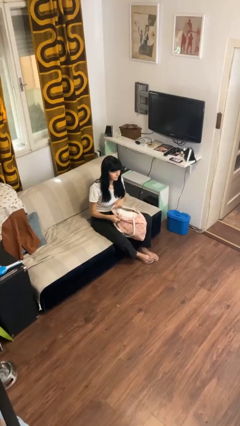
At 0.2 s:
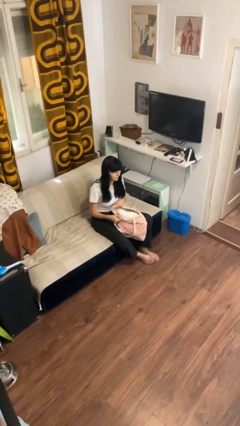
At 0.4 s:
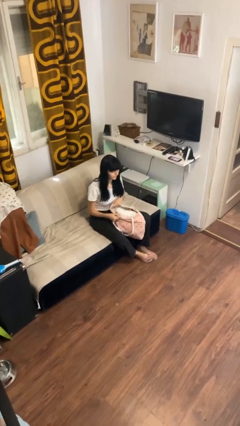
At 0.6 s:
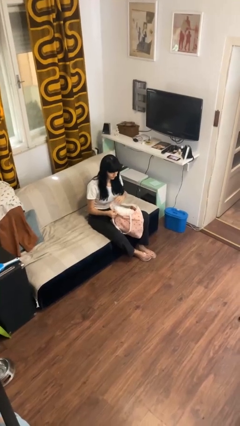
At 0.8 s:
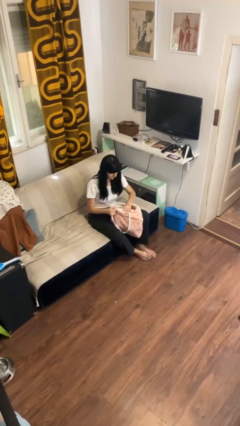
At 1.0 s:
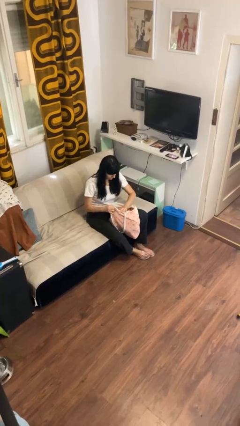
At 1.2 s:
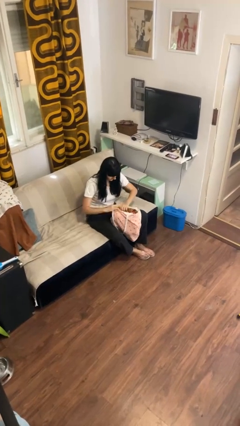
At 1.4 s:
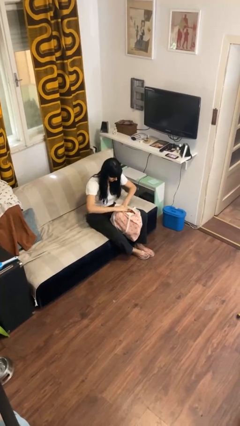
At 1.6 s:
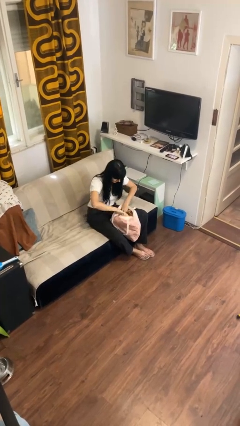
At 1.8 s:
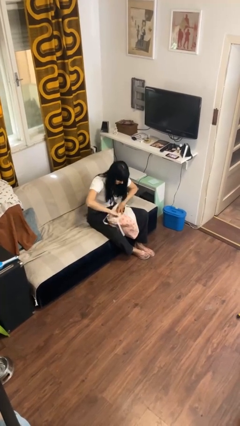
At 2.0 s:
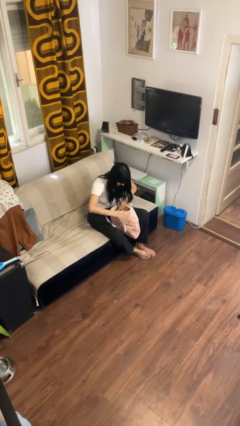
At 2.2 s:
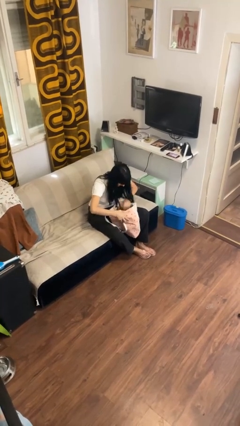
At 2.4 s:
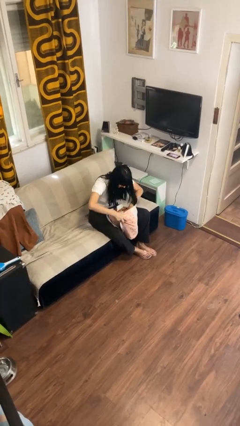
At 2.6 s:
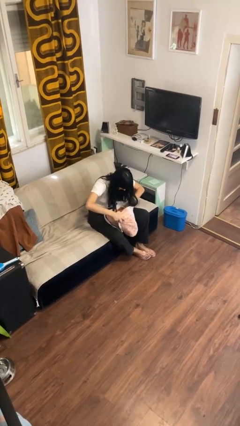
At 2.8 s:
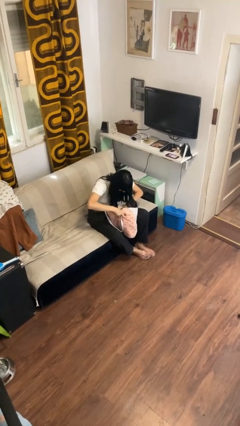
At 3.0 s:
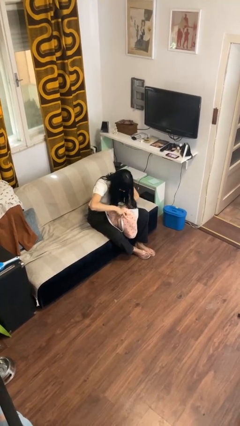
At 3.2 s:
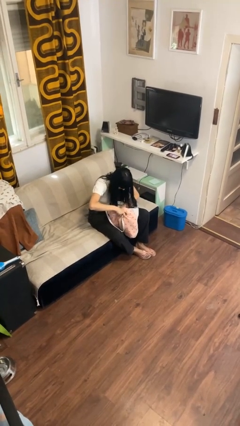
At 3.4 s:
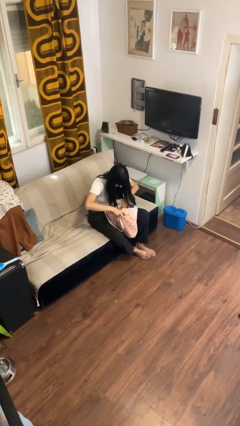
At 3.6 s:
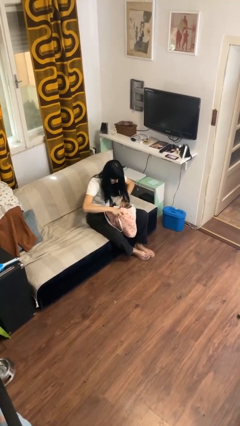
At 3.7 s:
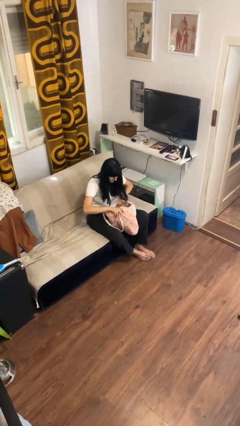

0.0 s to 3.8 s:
person searches in bag

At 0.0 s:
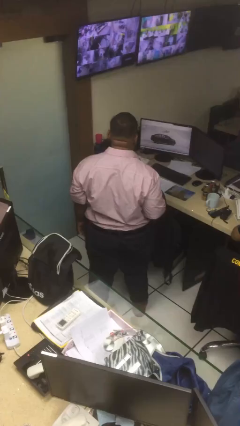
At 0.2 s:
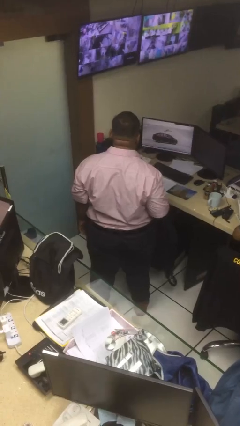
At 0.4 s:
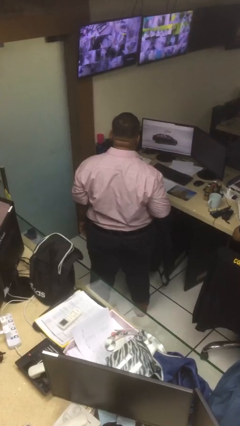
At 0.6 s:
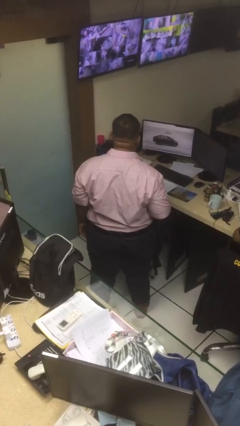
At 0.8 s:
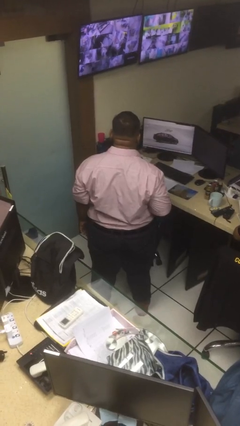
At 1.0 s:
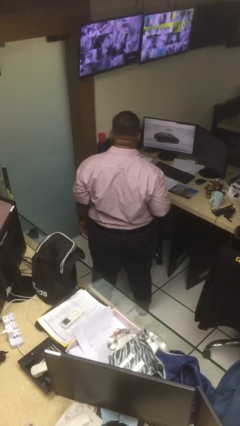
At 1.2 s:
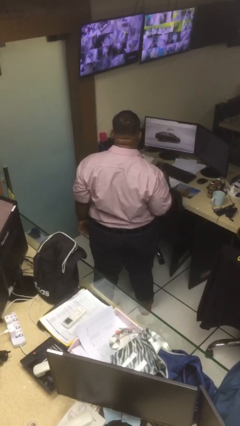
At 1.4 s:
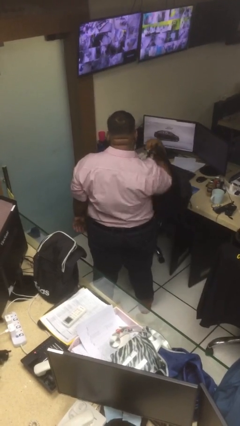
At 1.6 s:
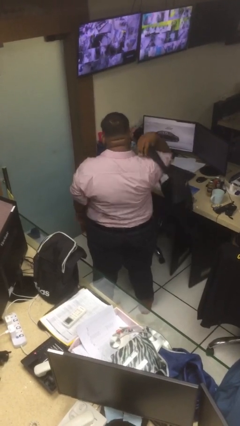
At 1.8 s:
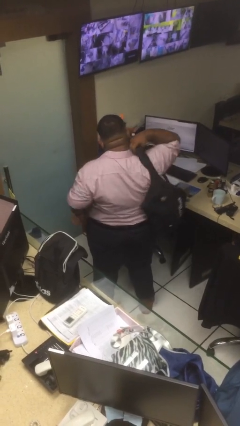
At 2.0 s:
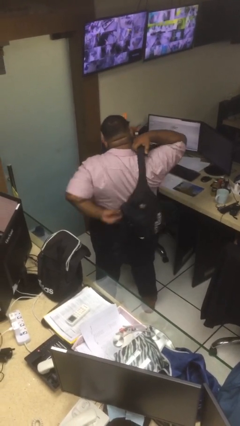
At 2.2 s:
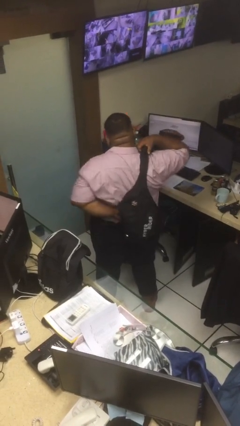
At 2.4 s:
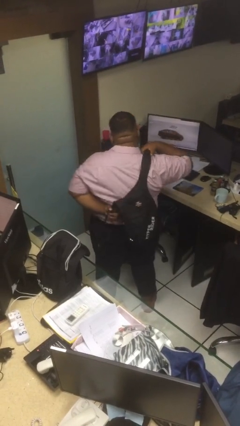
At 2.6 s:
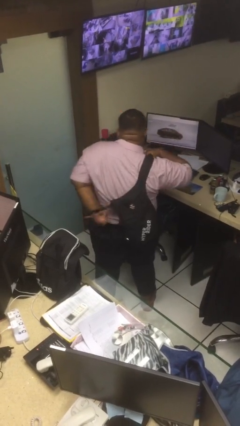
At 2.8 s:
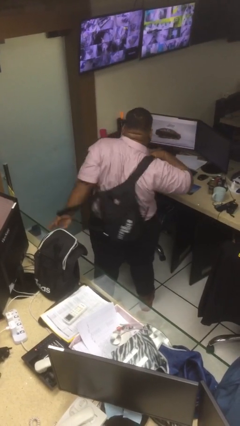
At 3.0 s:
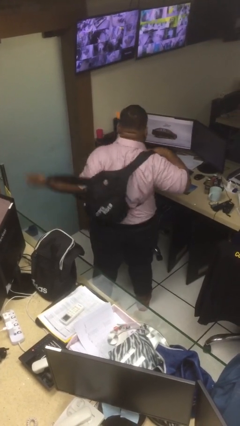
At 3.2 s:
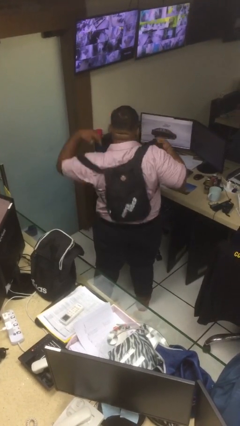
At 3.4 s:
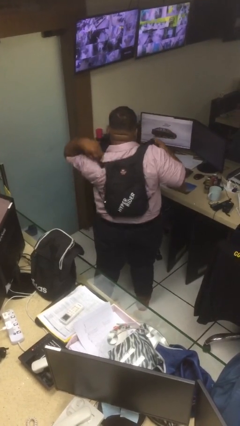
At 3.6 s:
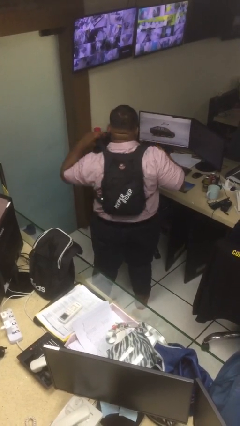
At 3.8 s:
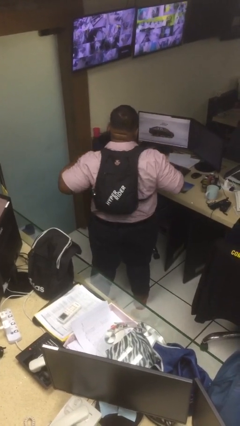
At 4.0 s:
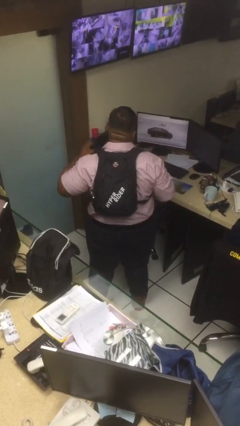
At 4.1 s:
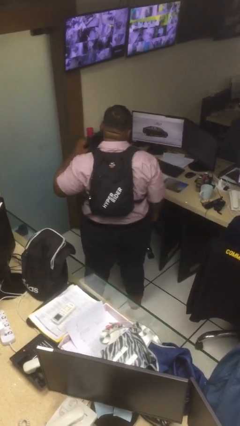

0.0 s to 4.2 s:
person puts on backpack

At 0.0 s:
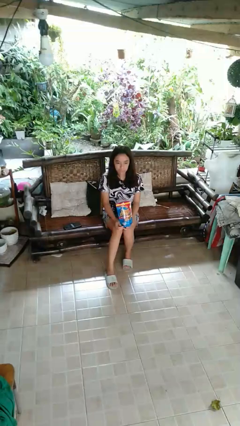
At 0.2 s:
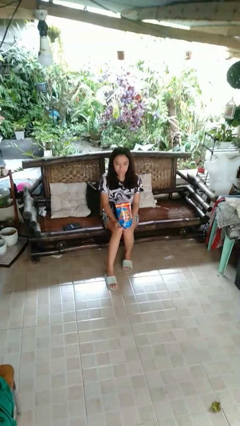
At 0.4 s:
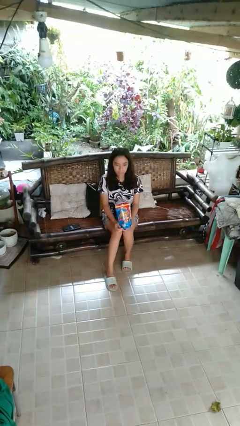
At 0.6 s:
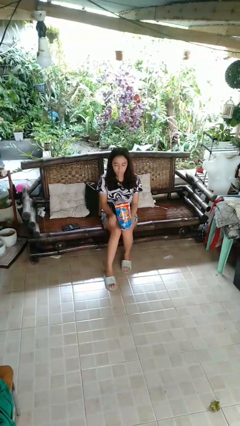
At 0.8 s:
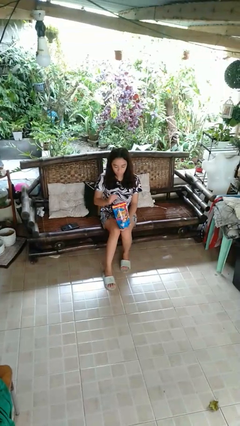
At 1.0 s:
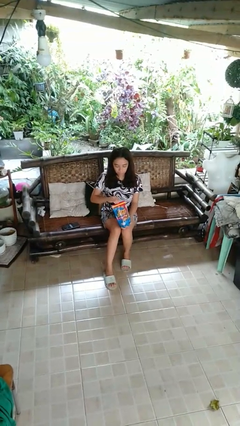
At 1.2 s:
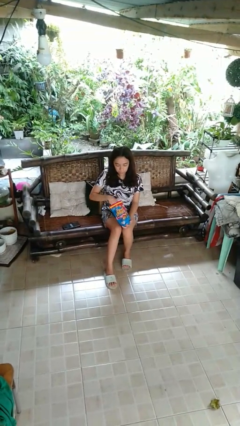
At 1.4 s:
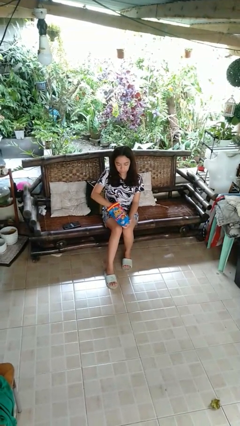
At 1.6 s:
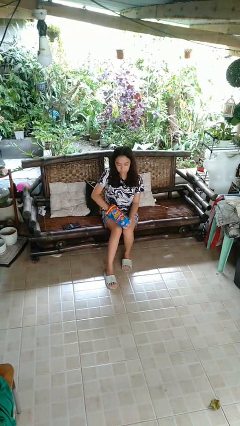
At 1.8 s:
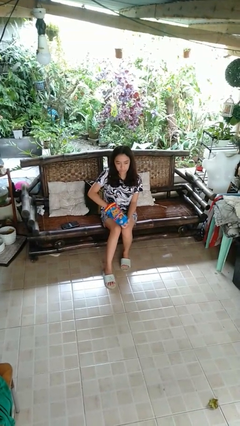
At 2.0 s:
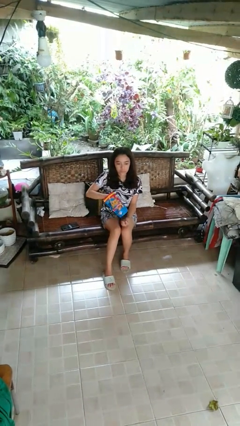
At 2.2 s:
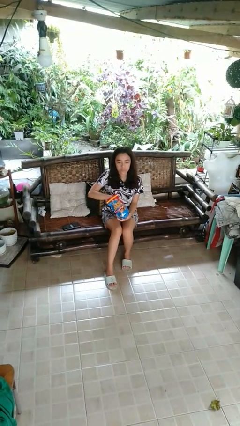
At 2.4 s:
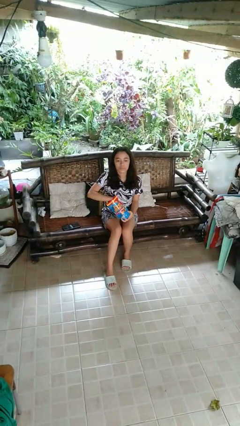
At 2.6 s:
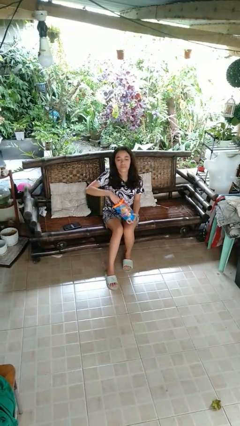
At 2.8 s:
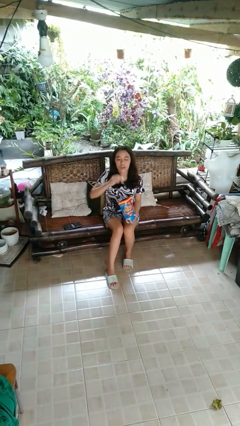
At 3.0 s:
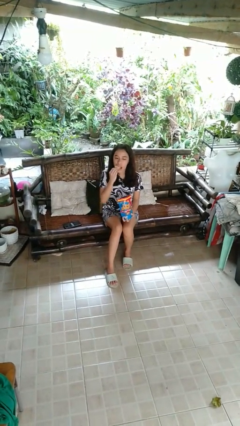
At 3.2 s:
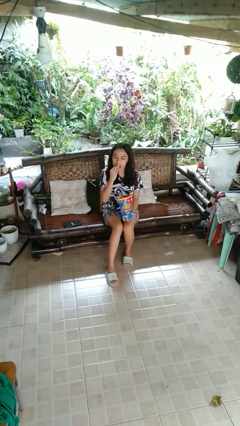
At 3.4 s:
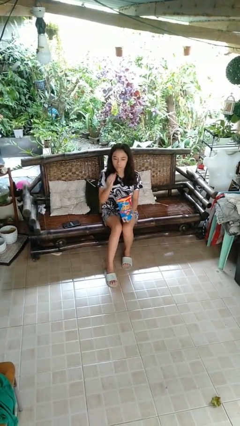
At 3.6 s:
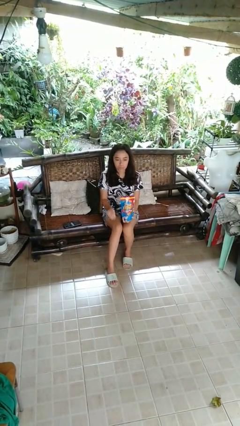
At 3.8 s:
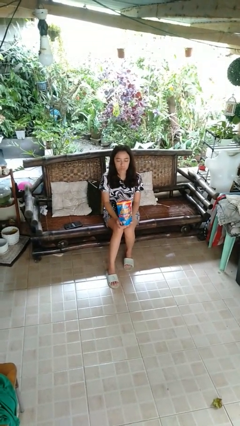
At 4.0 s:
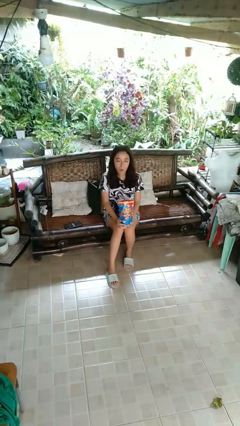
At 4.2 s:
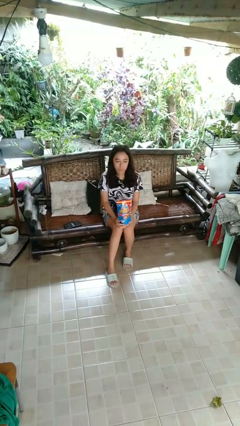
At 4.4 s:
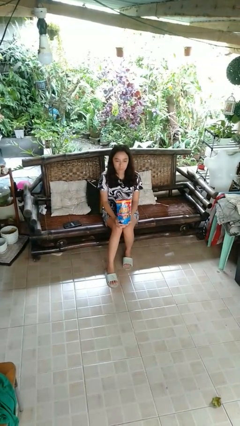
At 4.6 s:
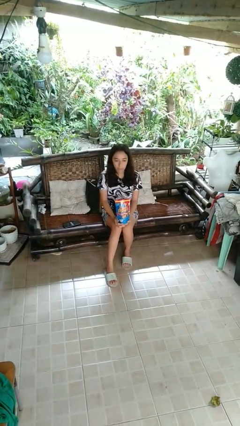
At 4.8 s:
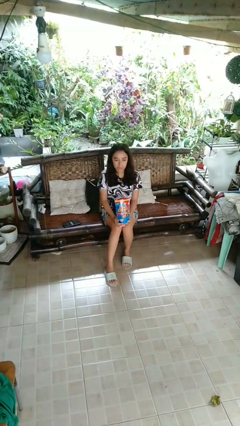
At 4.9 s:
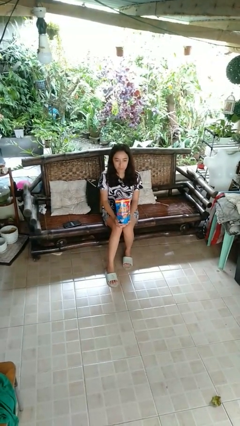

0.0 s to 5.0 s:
person eats snack from bag

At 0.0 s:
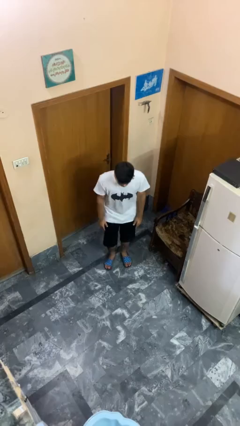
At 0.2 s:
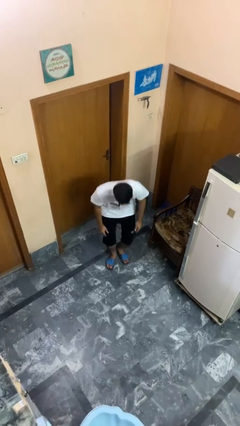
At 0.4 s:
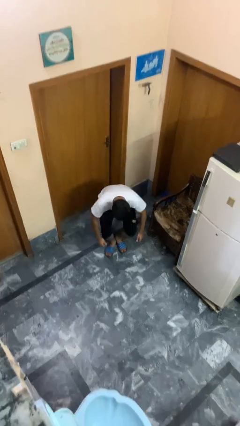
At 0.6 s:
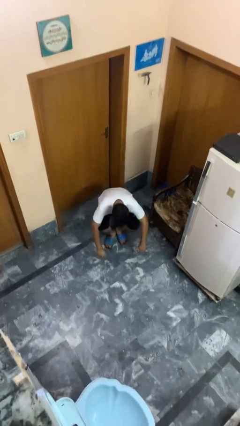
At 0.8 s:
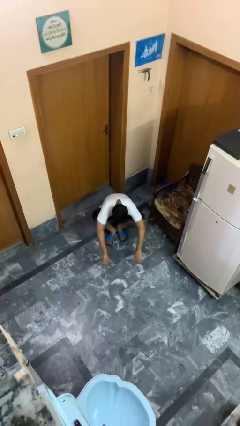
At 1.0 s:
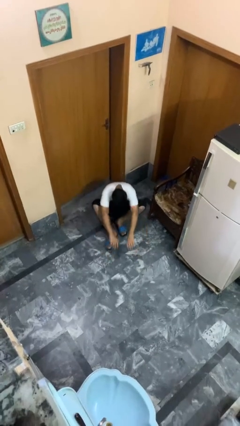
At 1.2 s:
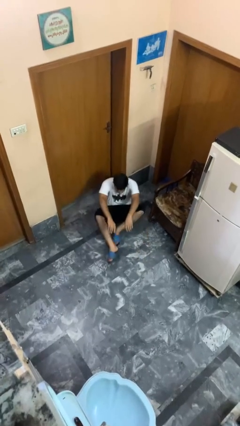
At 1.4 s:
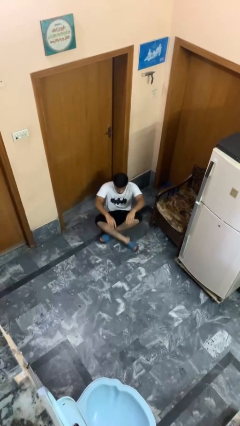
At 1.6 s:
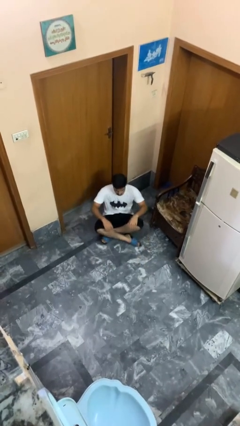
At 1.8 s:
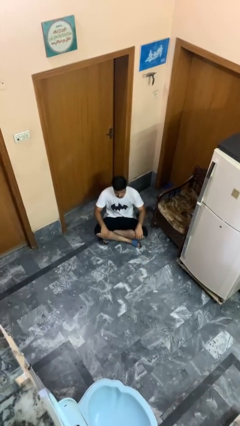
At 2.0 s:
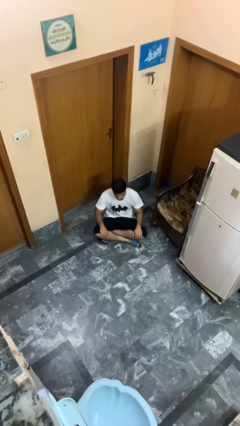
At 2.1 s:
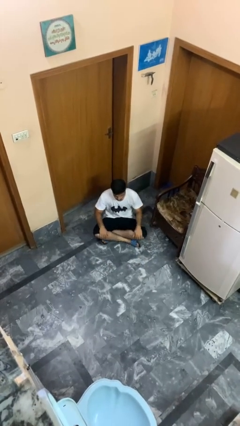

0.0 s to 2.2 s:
person sits crisscross

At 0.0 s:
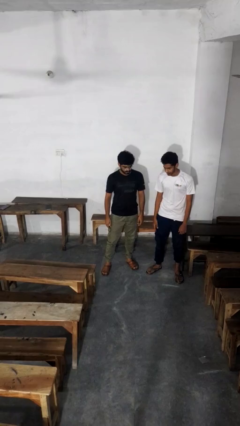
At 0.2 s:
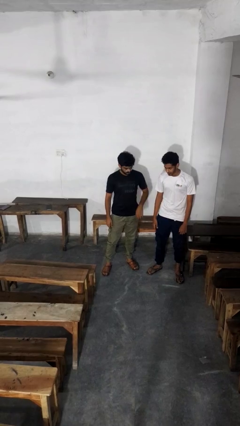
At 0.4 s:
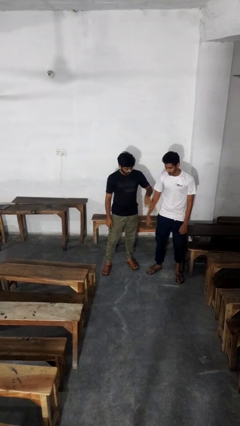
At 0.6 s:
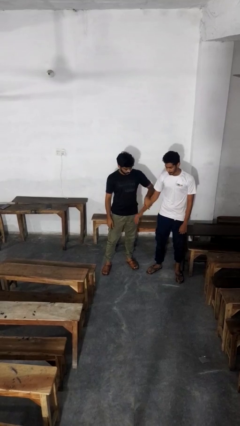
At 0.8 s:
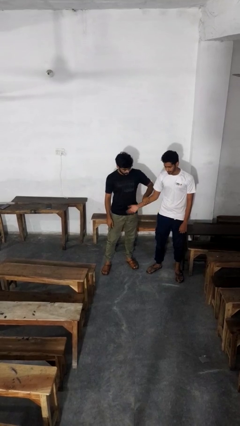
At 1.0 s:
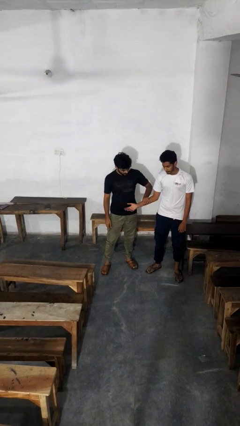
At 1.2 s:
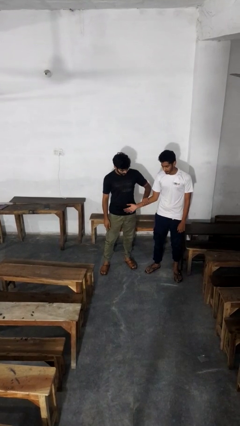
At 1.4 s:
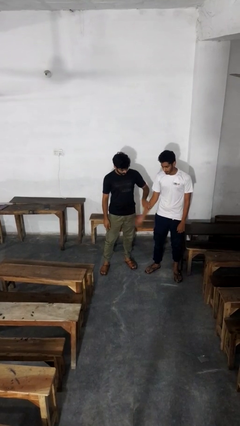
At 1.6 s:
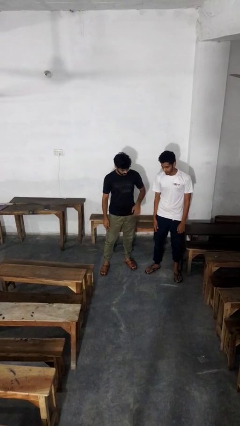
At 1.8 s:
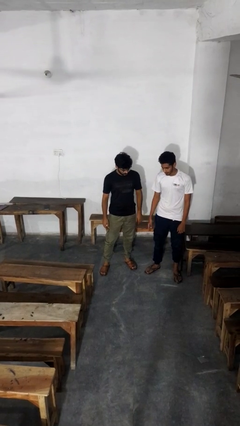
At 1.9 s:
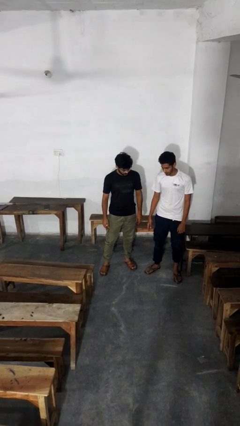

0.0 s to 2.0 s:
person grabs person by forearm
